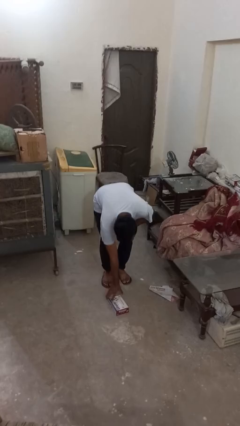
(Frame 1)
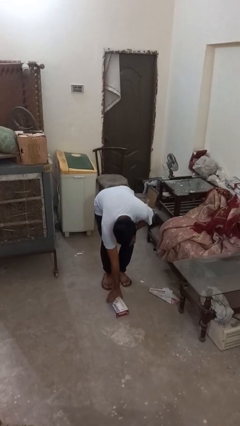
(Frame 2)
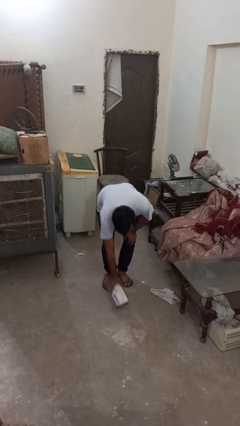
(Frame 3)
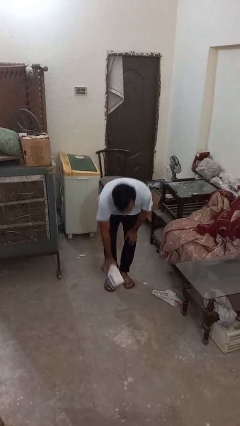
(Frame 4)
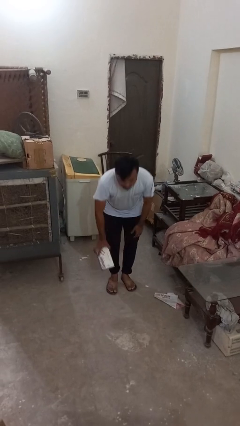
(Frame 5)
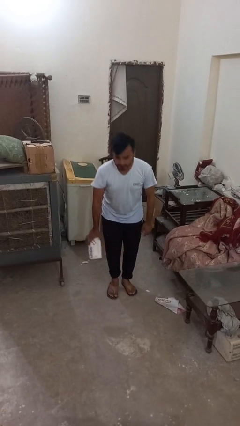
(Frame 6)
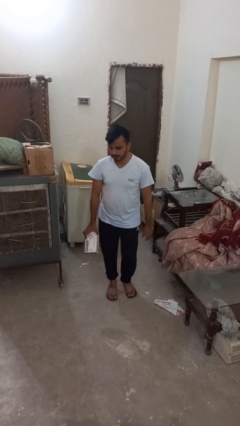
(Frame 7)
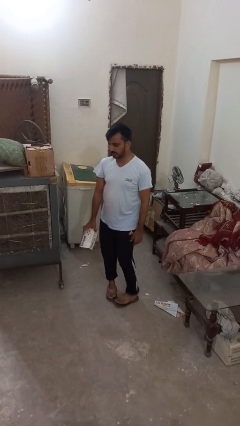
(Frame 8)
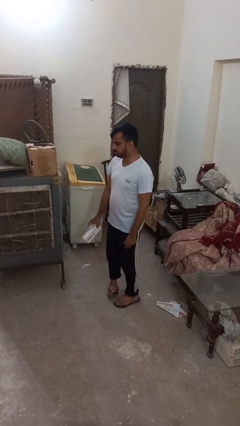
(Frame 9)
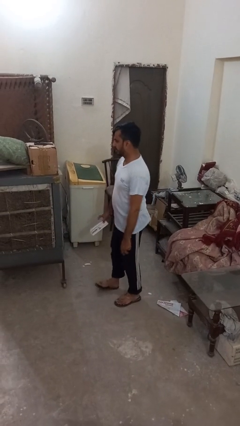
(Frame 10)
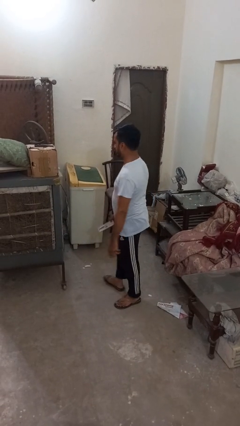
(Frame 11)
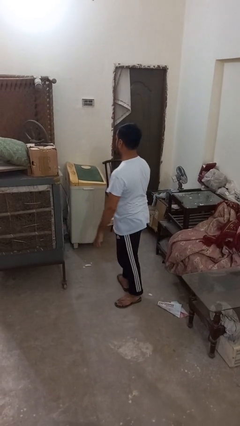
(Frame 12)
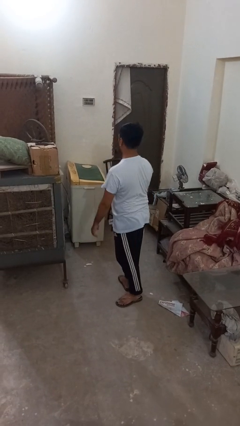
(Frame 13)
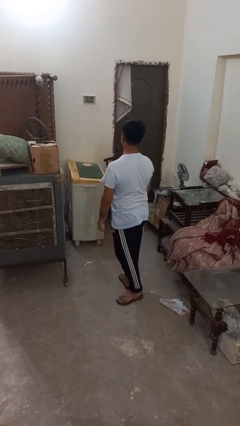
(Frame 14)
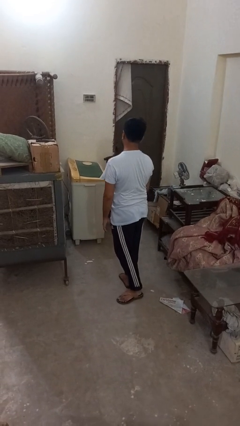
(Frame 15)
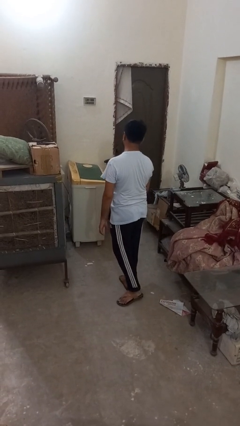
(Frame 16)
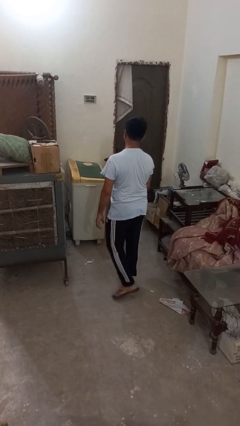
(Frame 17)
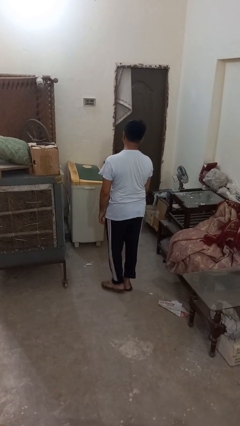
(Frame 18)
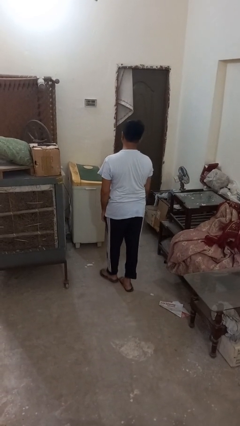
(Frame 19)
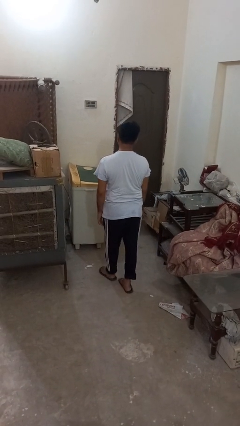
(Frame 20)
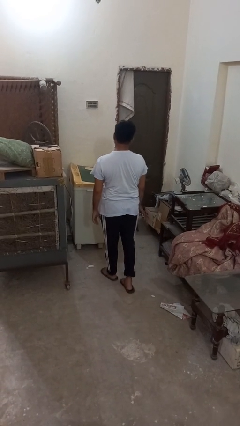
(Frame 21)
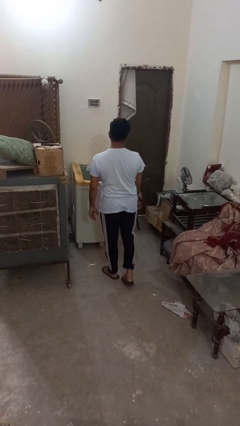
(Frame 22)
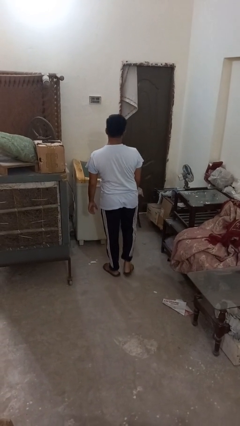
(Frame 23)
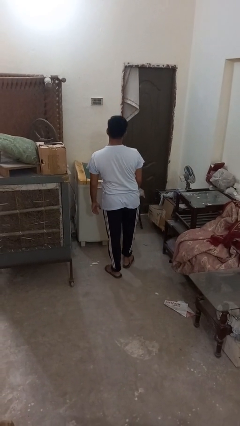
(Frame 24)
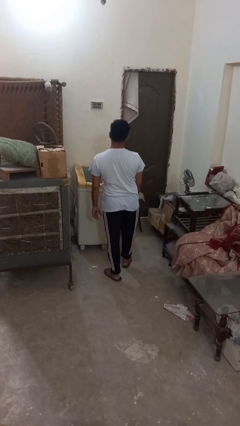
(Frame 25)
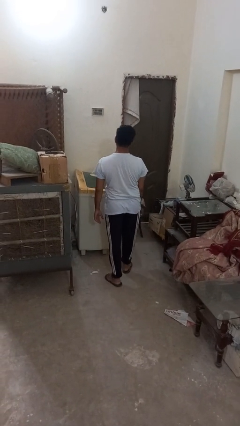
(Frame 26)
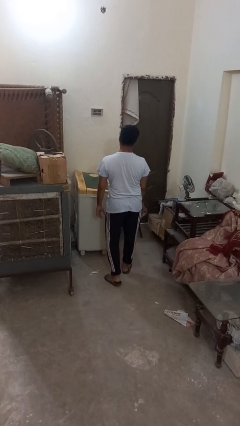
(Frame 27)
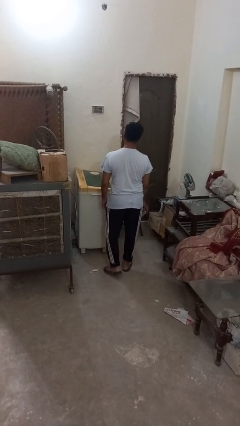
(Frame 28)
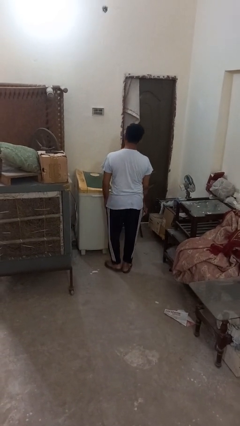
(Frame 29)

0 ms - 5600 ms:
person picks up object from floor

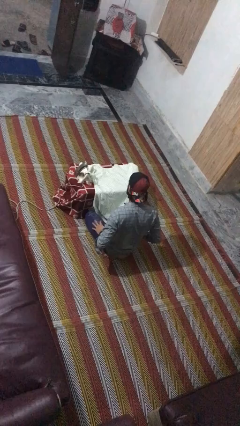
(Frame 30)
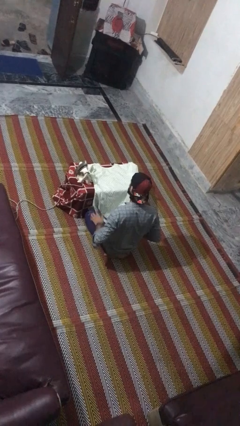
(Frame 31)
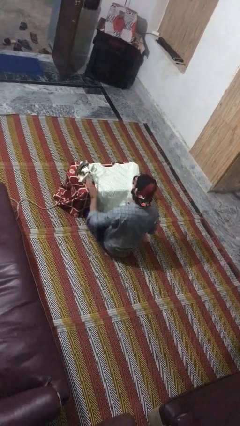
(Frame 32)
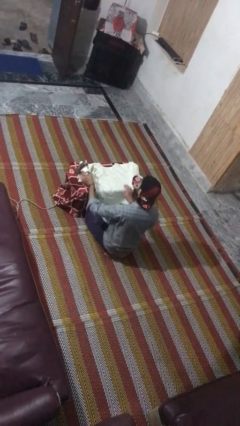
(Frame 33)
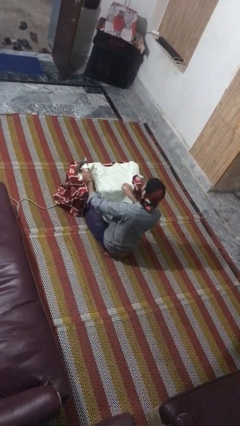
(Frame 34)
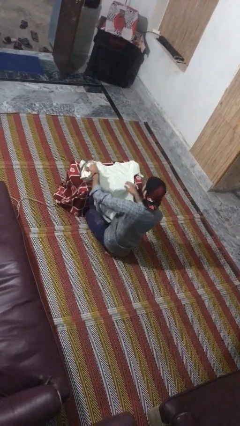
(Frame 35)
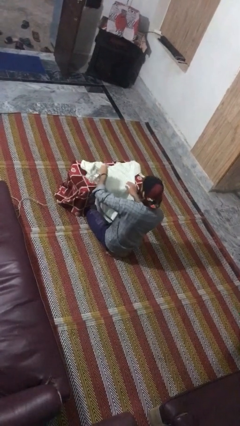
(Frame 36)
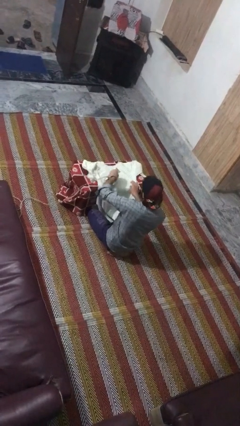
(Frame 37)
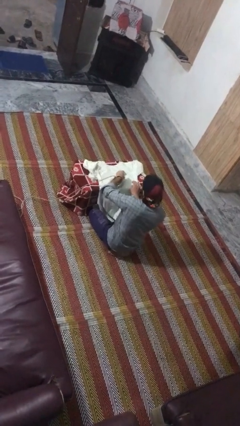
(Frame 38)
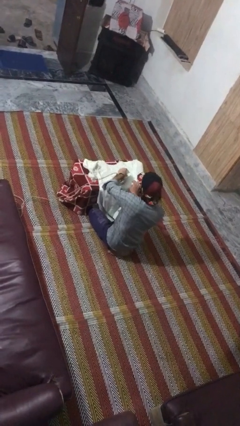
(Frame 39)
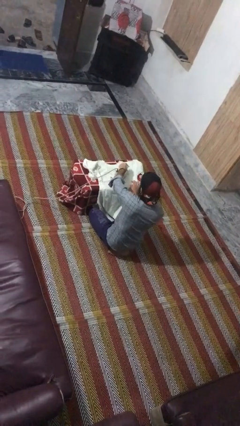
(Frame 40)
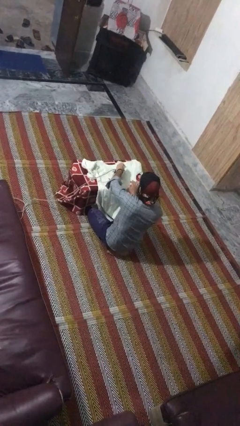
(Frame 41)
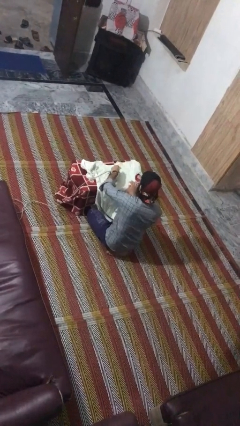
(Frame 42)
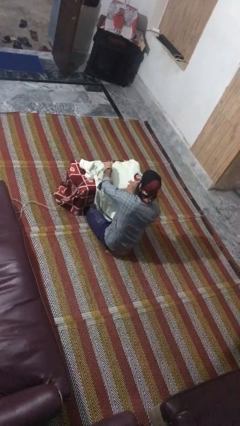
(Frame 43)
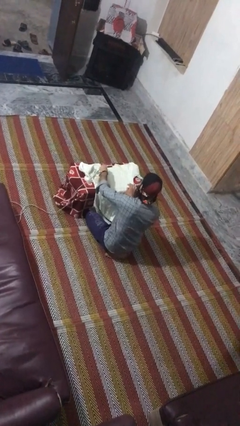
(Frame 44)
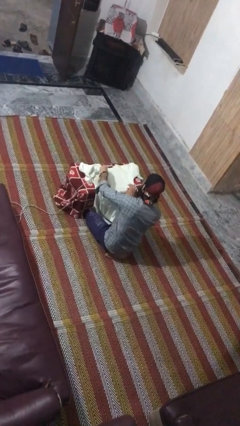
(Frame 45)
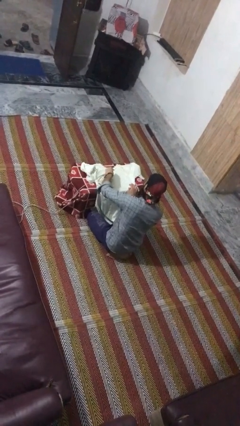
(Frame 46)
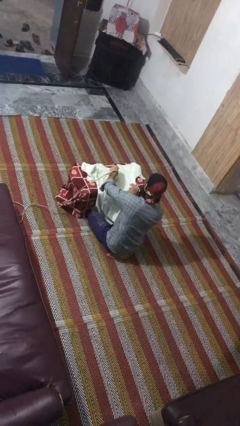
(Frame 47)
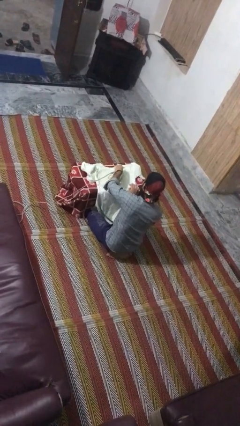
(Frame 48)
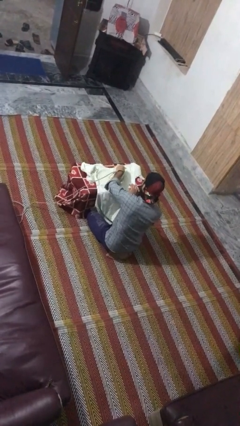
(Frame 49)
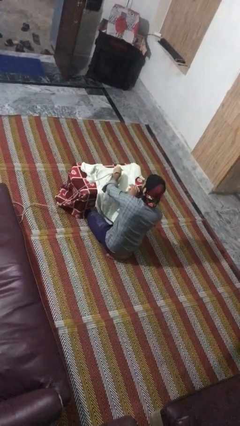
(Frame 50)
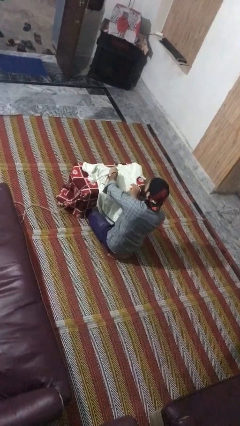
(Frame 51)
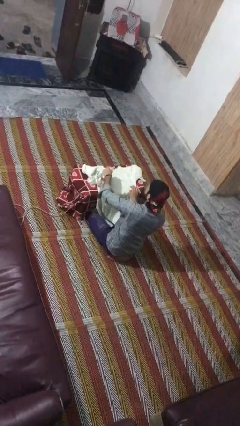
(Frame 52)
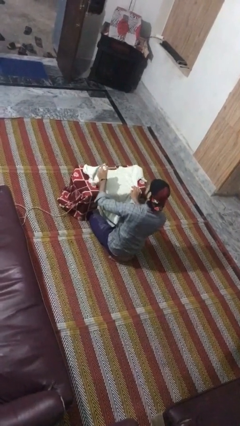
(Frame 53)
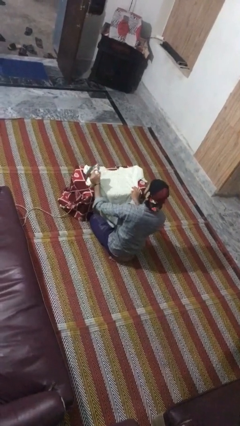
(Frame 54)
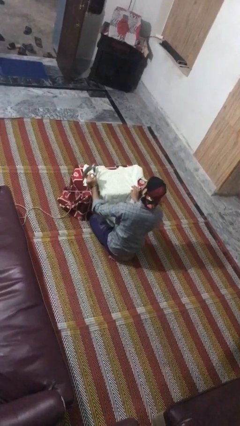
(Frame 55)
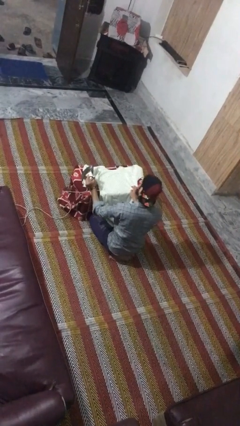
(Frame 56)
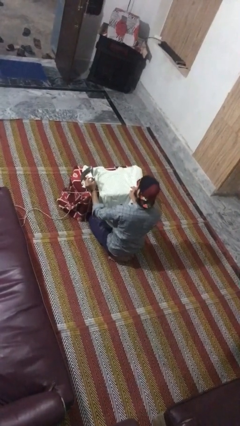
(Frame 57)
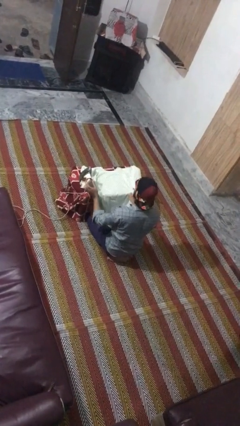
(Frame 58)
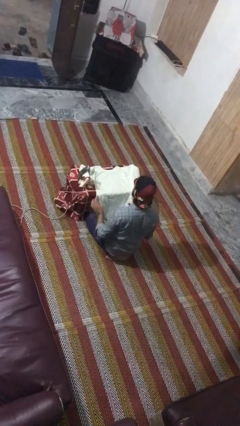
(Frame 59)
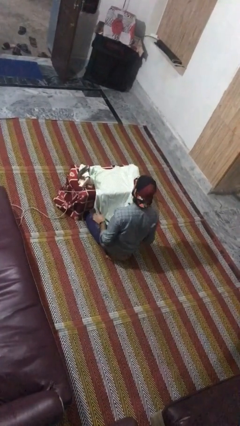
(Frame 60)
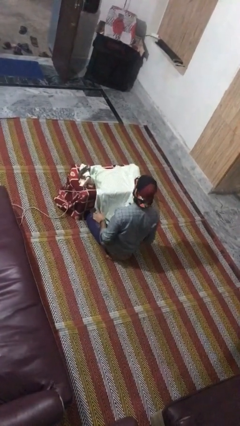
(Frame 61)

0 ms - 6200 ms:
person irons clothes

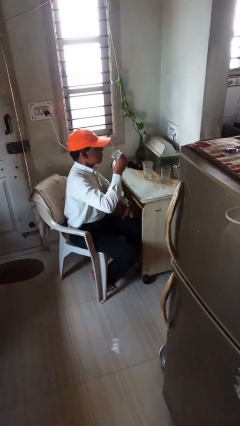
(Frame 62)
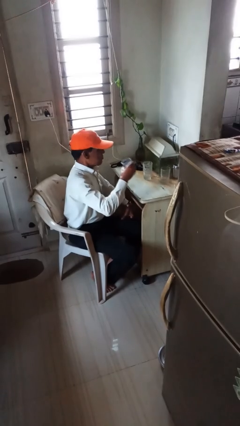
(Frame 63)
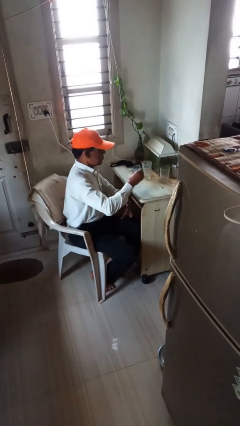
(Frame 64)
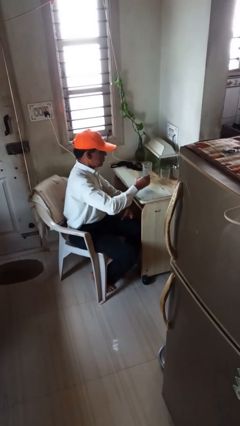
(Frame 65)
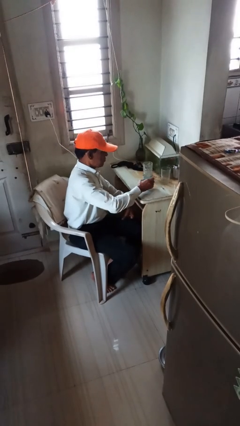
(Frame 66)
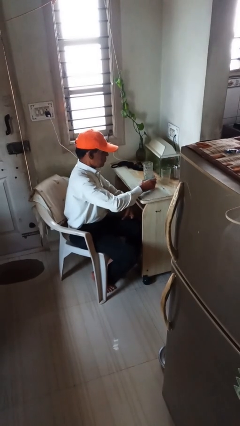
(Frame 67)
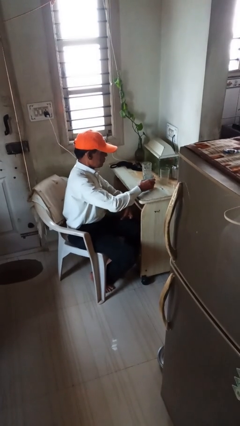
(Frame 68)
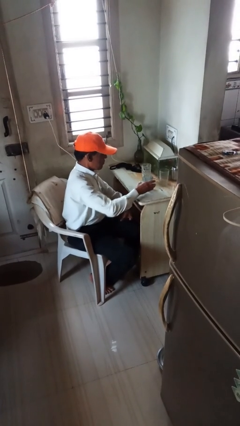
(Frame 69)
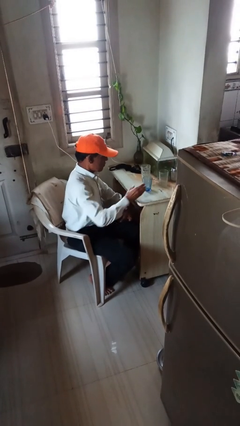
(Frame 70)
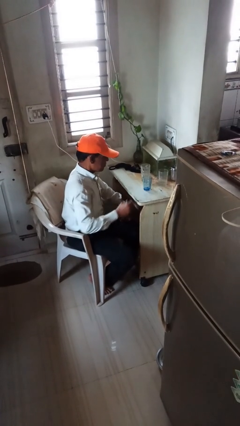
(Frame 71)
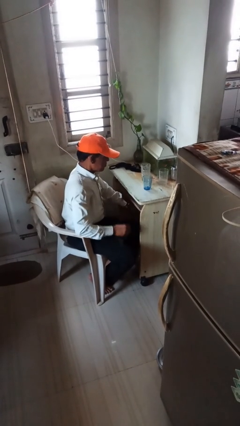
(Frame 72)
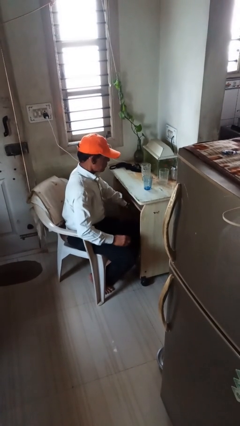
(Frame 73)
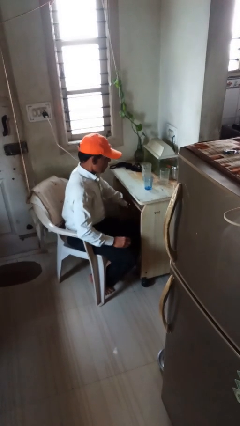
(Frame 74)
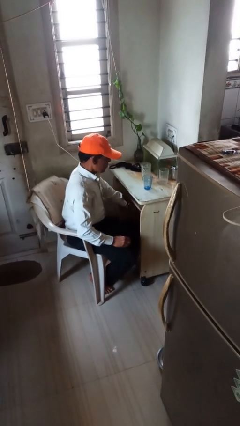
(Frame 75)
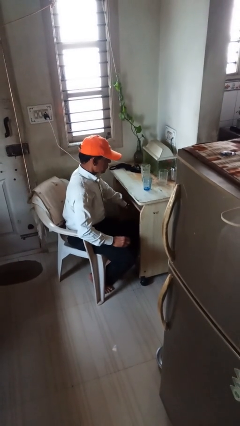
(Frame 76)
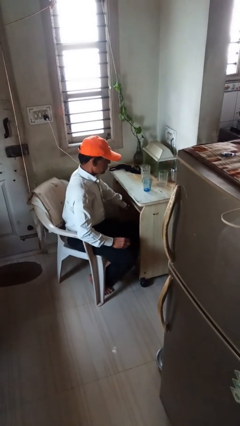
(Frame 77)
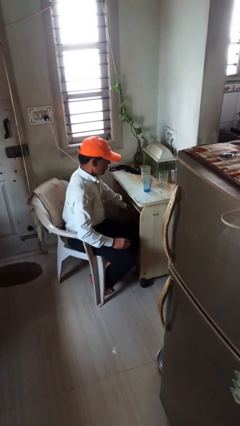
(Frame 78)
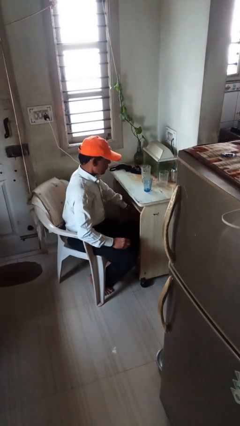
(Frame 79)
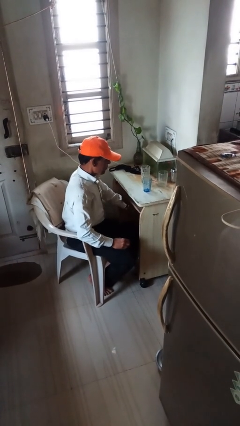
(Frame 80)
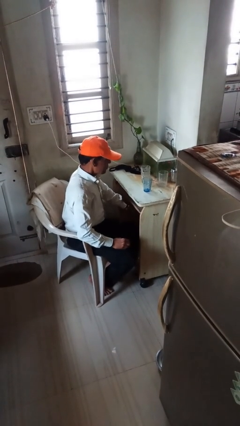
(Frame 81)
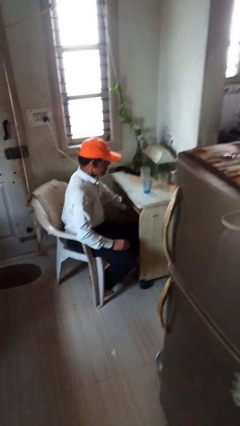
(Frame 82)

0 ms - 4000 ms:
person puts down object on table

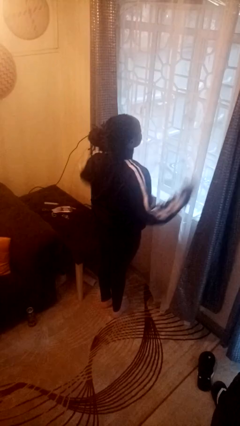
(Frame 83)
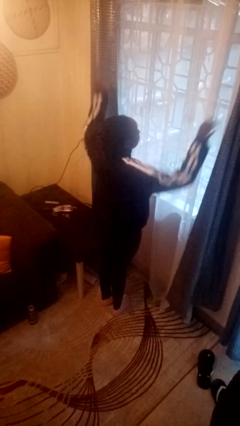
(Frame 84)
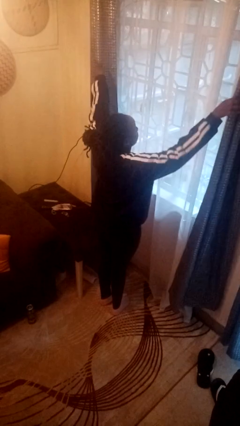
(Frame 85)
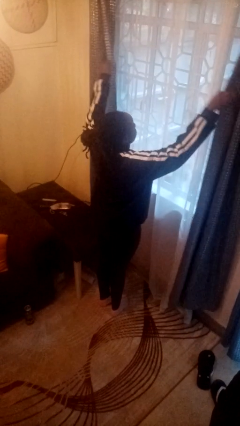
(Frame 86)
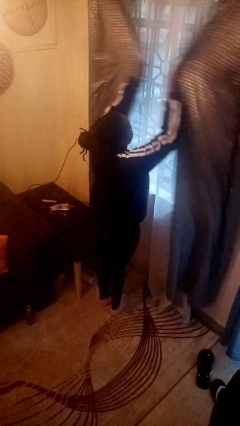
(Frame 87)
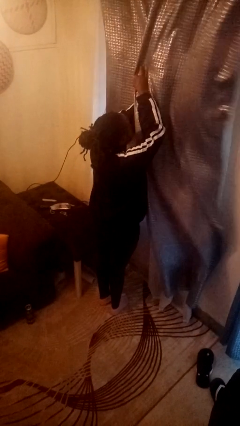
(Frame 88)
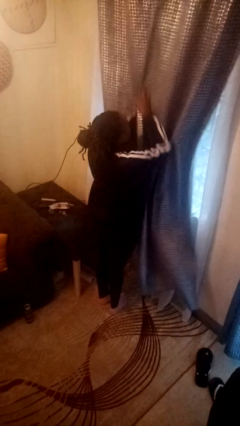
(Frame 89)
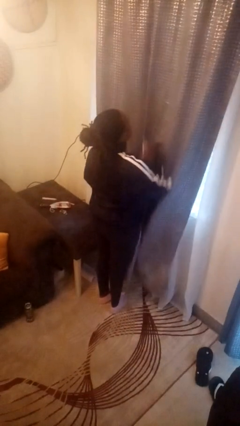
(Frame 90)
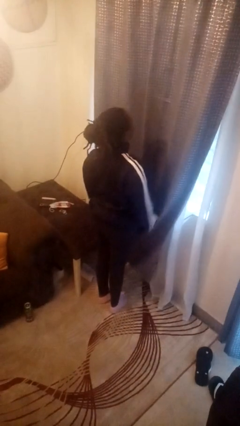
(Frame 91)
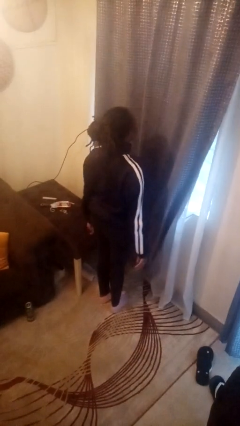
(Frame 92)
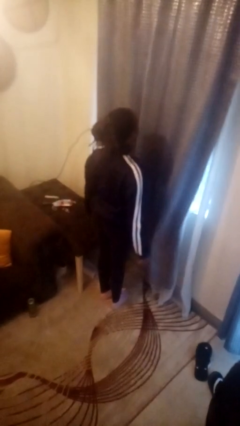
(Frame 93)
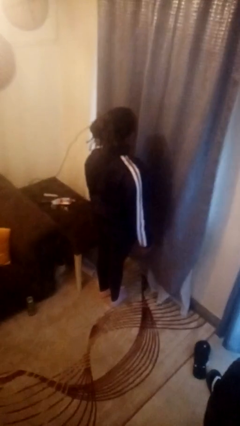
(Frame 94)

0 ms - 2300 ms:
person closes curtains
